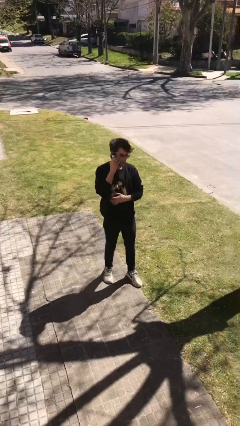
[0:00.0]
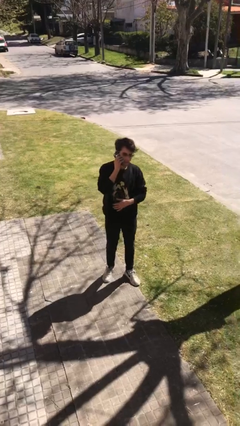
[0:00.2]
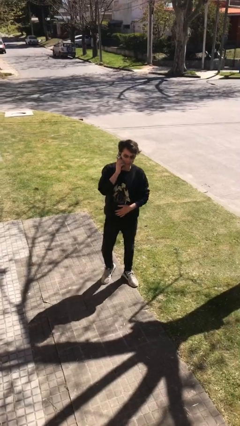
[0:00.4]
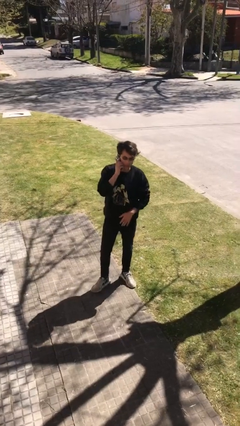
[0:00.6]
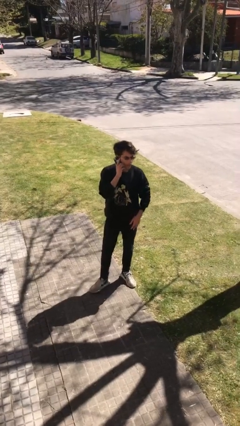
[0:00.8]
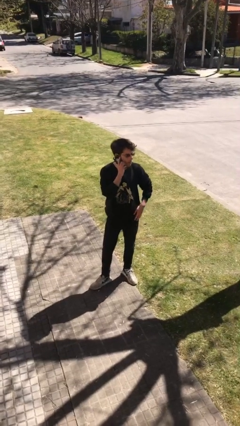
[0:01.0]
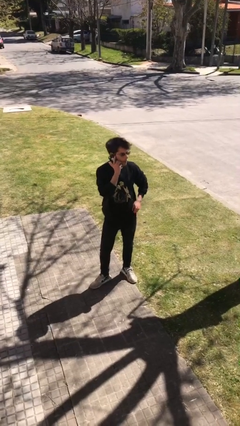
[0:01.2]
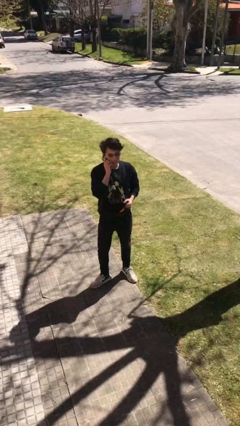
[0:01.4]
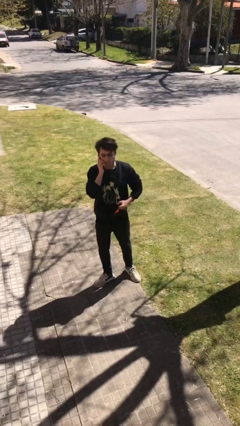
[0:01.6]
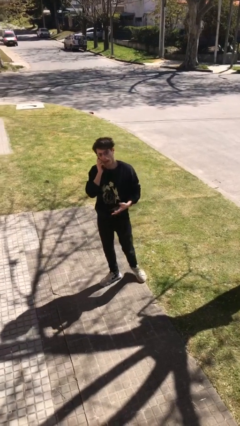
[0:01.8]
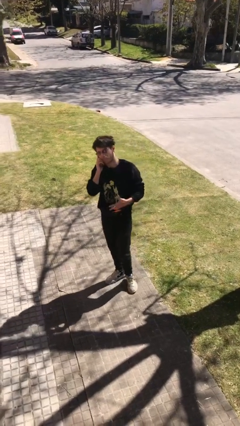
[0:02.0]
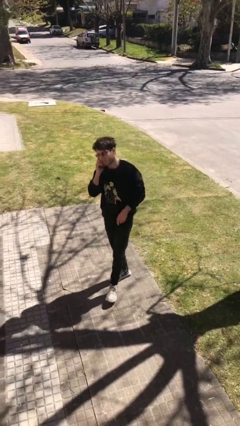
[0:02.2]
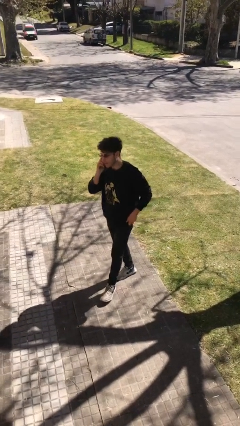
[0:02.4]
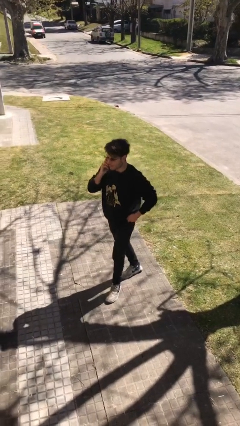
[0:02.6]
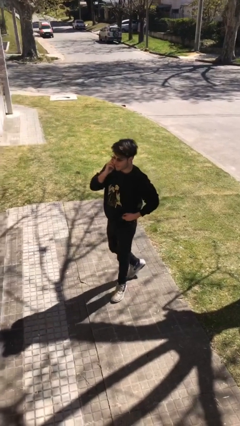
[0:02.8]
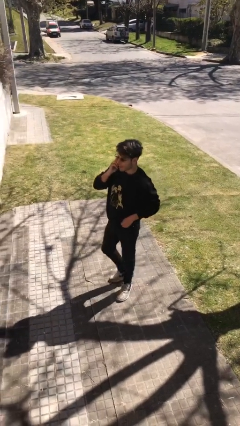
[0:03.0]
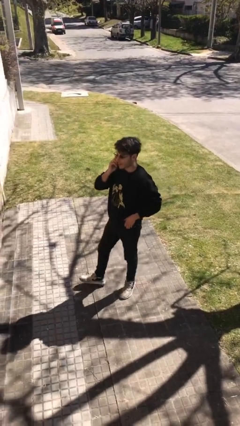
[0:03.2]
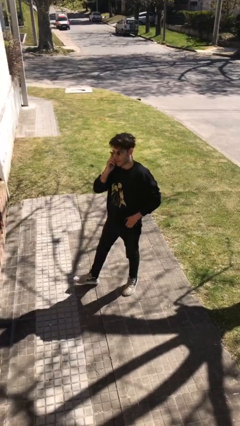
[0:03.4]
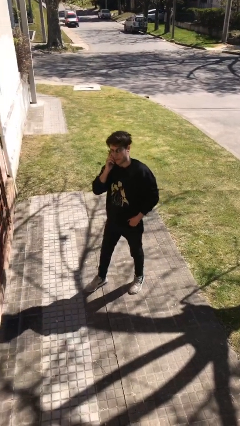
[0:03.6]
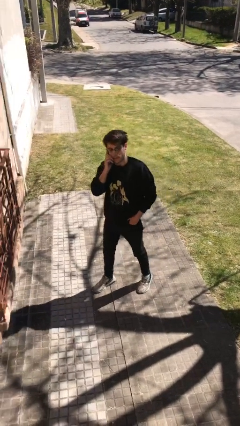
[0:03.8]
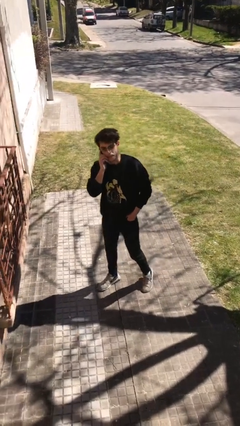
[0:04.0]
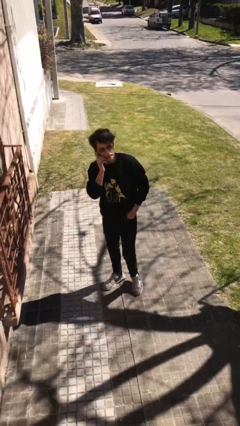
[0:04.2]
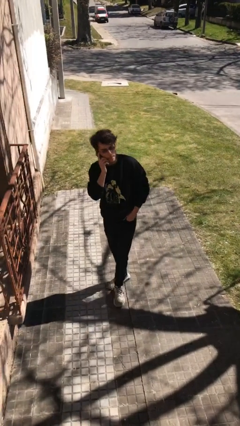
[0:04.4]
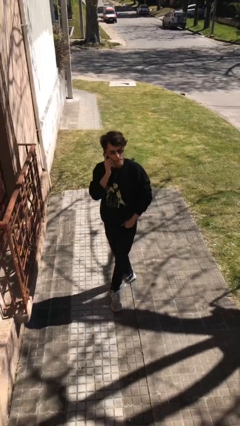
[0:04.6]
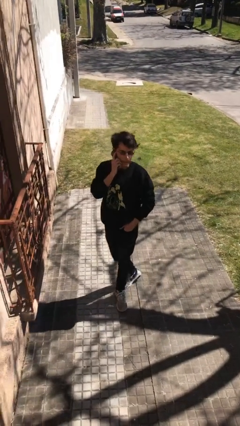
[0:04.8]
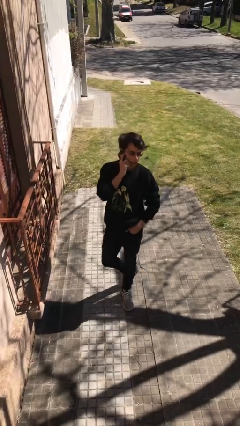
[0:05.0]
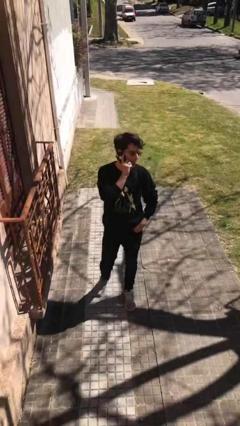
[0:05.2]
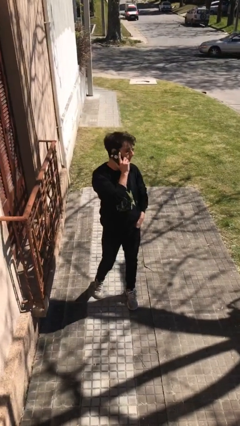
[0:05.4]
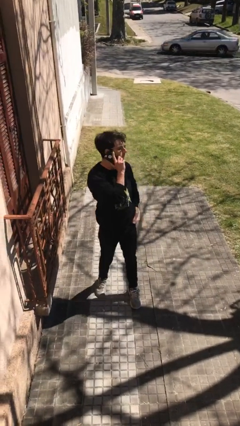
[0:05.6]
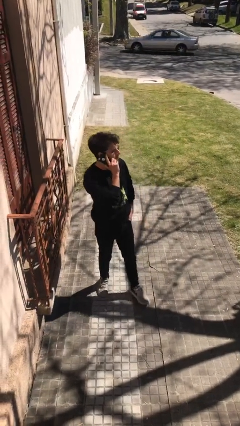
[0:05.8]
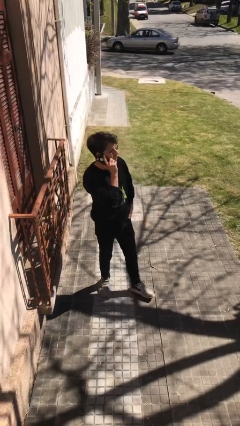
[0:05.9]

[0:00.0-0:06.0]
person talks on phone

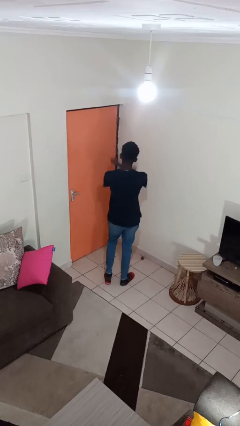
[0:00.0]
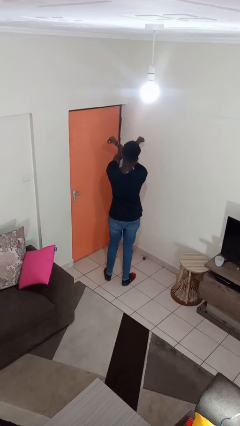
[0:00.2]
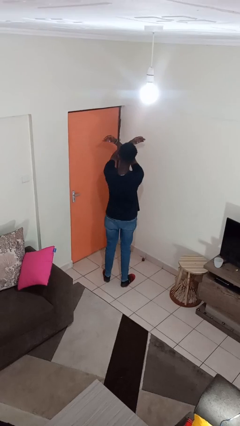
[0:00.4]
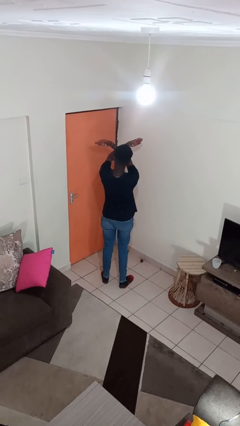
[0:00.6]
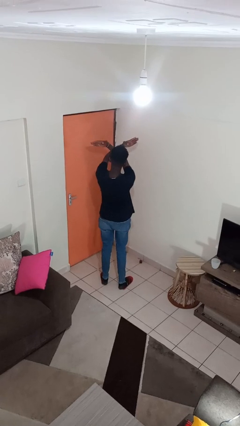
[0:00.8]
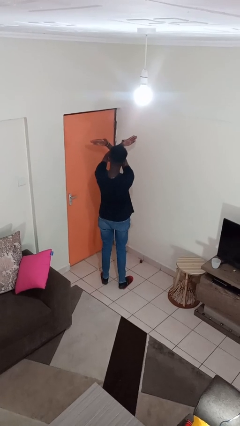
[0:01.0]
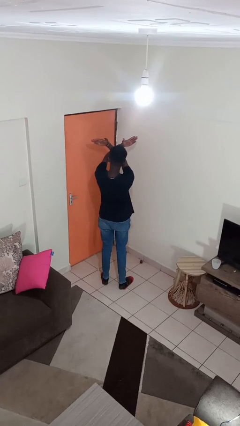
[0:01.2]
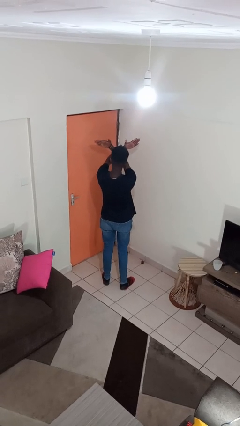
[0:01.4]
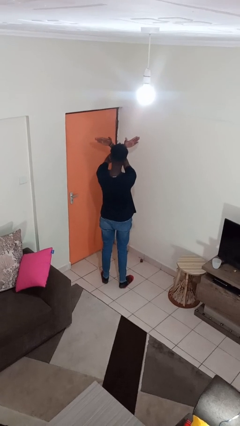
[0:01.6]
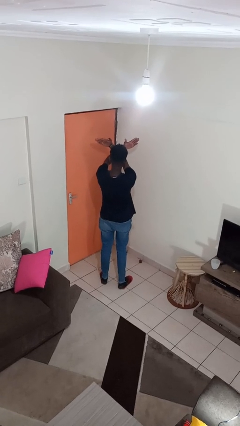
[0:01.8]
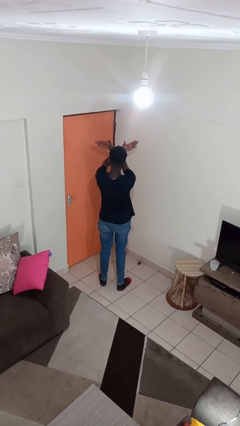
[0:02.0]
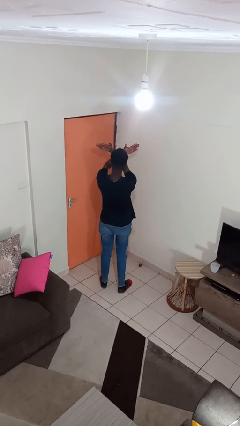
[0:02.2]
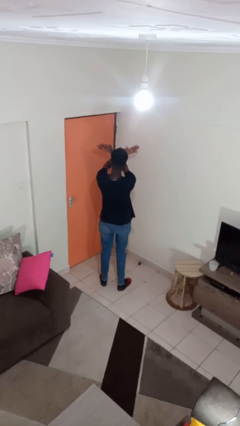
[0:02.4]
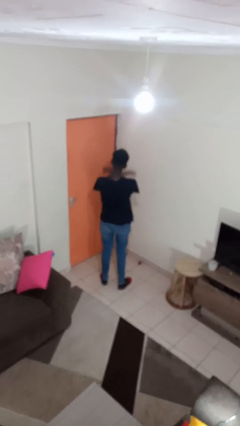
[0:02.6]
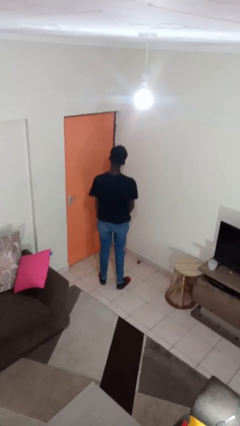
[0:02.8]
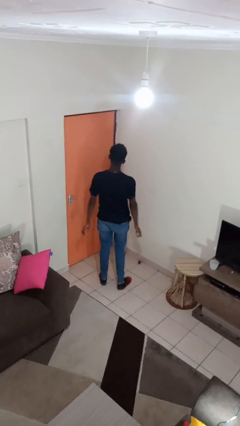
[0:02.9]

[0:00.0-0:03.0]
person gestures arms x

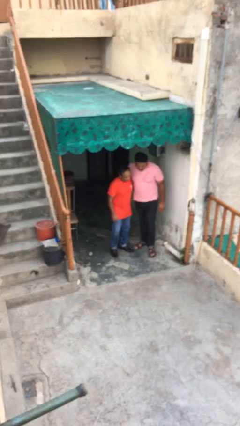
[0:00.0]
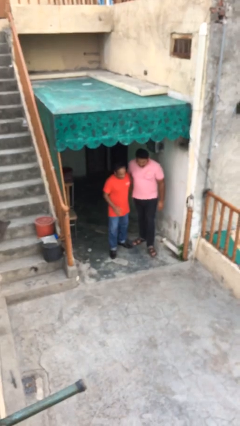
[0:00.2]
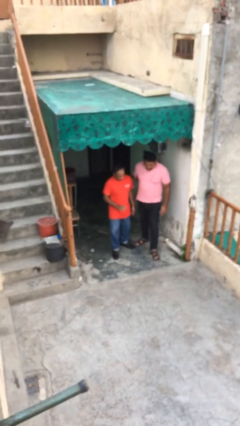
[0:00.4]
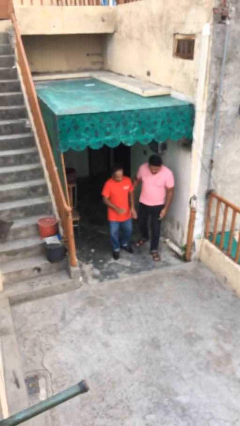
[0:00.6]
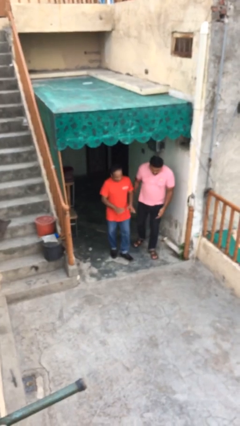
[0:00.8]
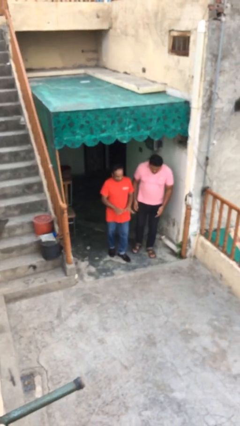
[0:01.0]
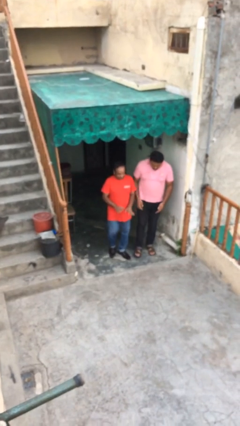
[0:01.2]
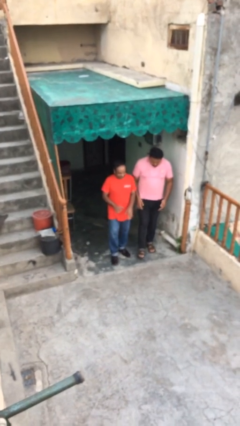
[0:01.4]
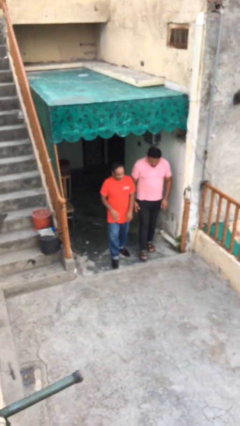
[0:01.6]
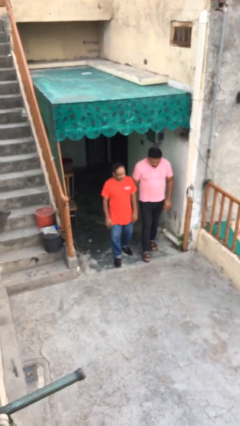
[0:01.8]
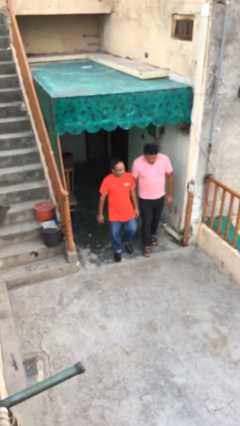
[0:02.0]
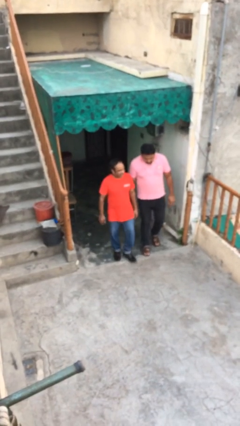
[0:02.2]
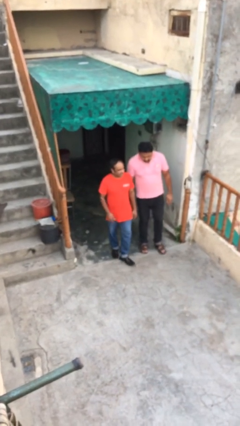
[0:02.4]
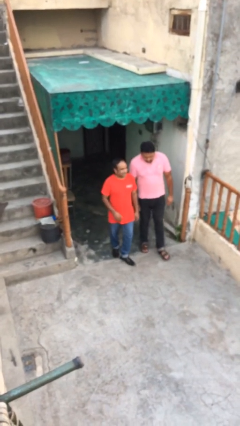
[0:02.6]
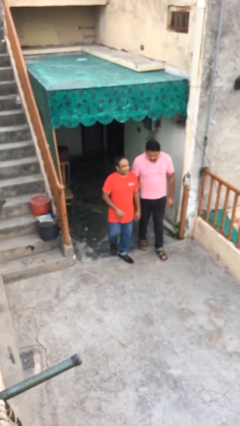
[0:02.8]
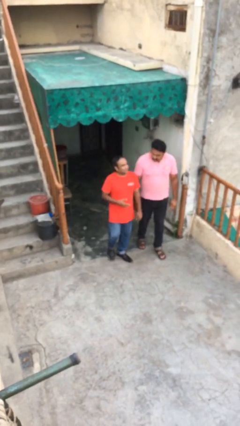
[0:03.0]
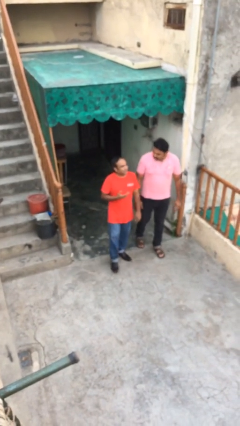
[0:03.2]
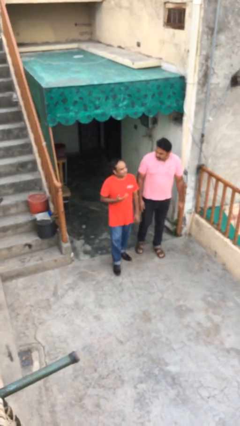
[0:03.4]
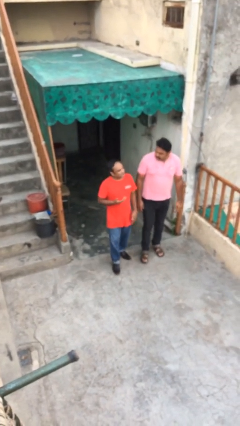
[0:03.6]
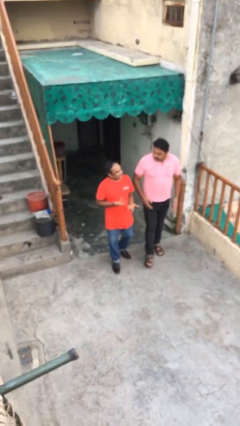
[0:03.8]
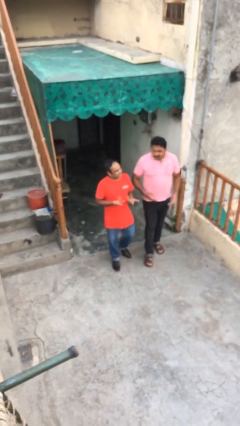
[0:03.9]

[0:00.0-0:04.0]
person talks to person

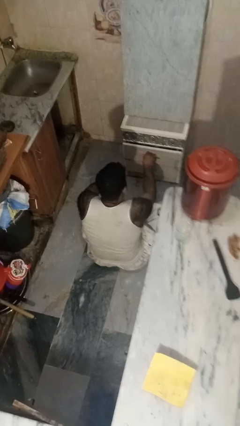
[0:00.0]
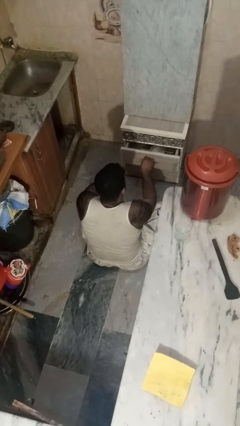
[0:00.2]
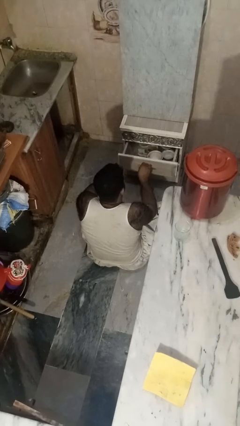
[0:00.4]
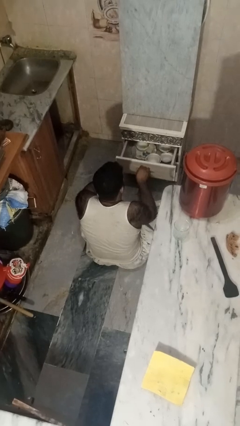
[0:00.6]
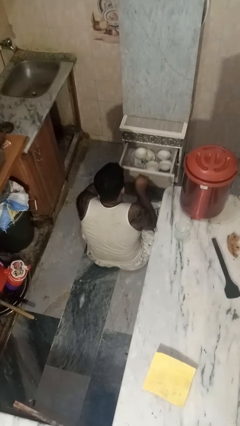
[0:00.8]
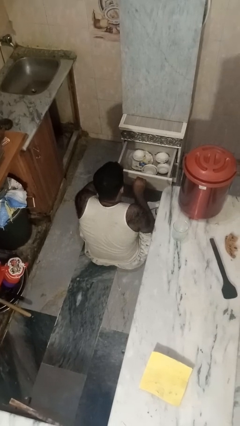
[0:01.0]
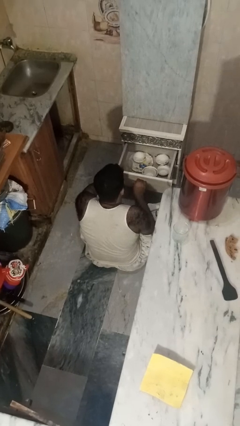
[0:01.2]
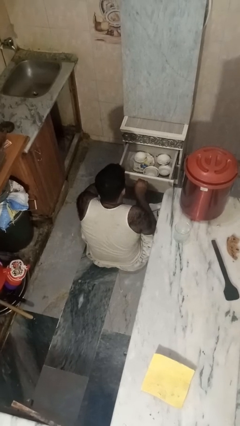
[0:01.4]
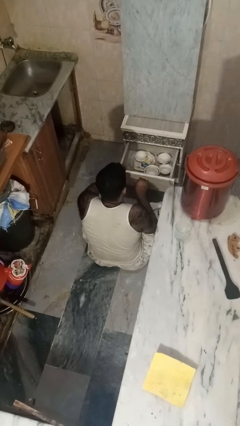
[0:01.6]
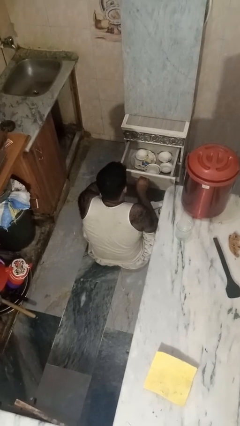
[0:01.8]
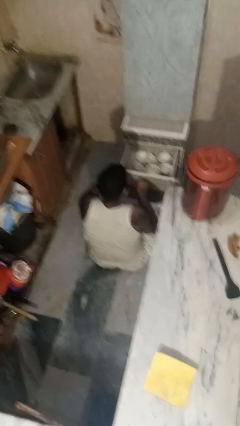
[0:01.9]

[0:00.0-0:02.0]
person opens kitchen drawer

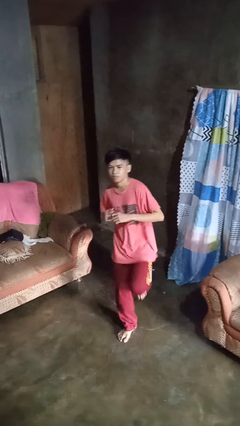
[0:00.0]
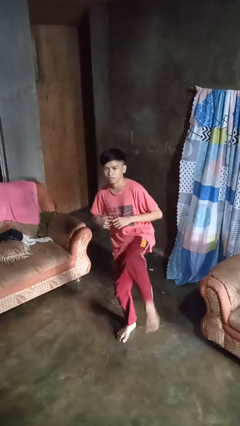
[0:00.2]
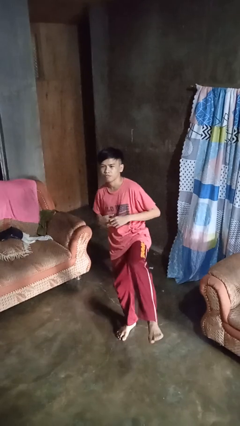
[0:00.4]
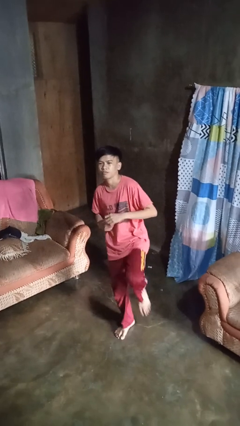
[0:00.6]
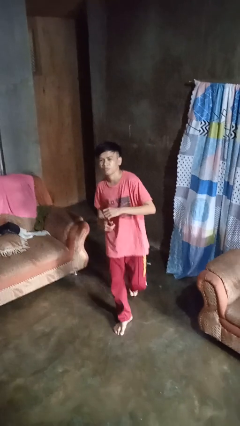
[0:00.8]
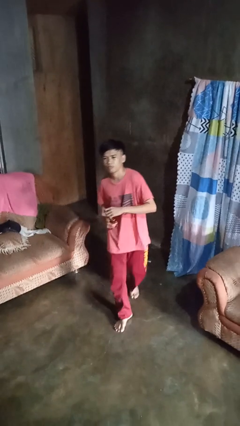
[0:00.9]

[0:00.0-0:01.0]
person karate kicks

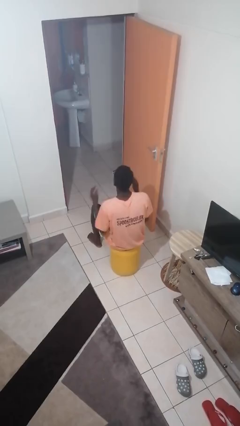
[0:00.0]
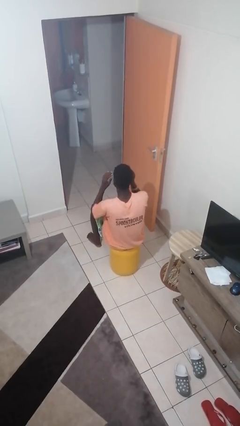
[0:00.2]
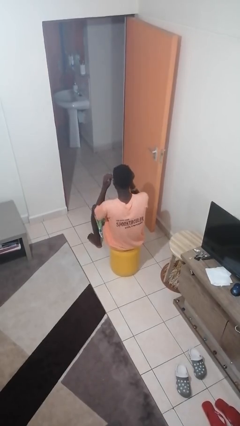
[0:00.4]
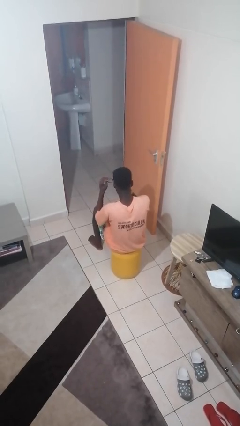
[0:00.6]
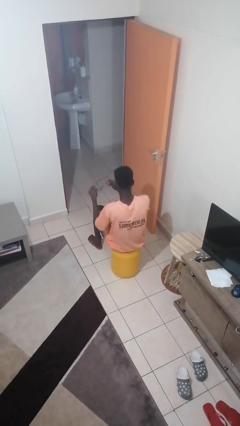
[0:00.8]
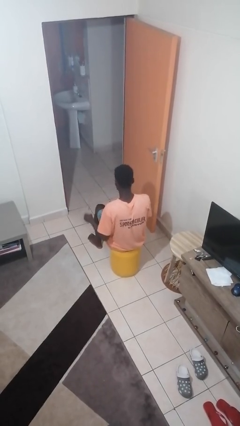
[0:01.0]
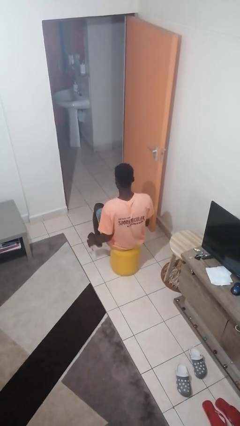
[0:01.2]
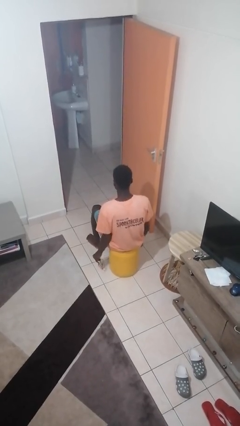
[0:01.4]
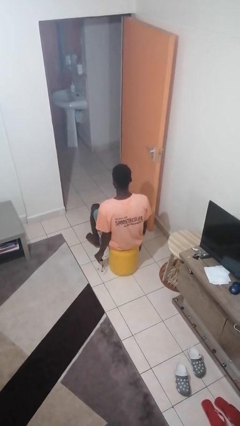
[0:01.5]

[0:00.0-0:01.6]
person takes off glasses
